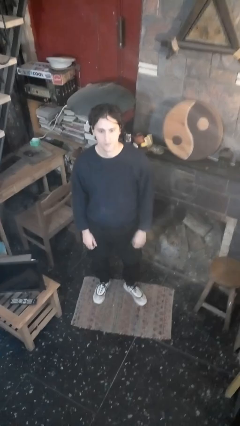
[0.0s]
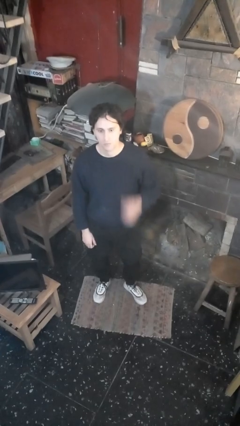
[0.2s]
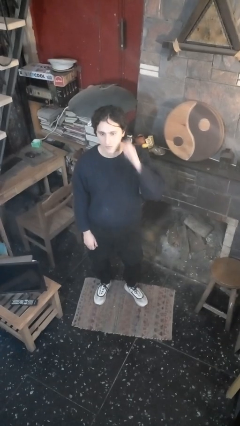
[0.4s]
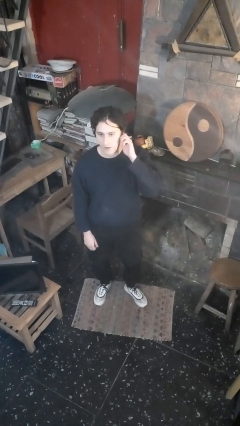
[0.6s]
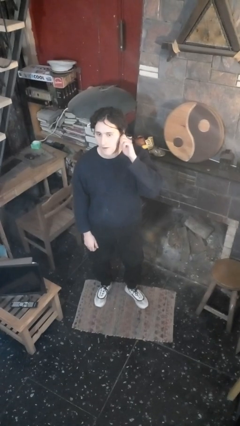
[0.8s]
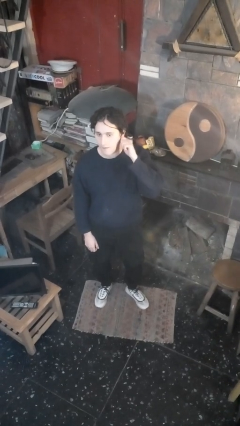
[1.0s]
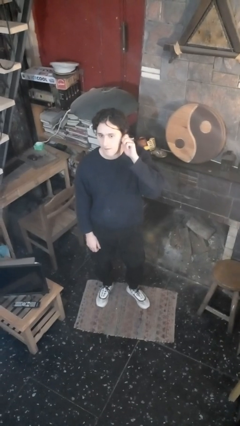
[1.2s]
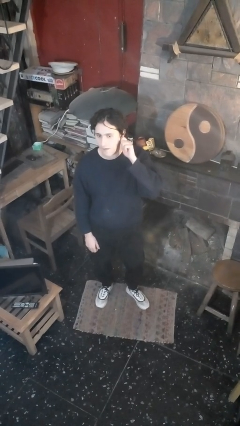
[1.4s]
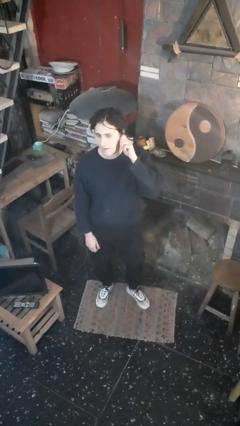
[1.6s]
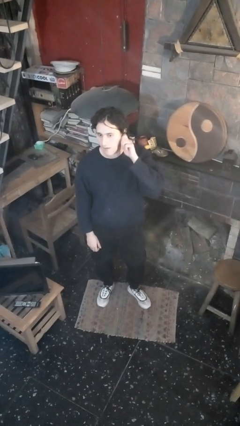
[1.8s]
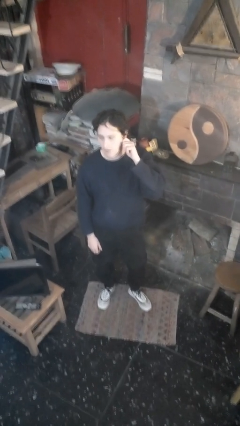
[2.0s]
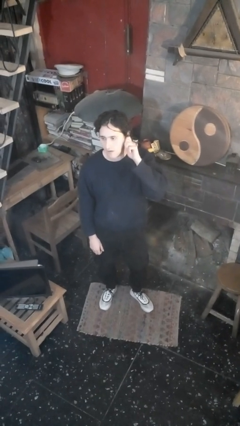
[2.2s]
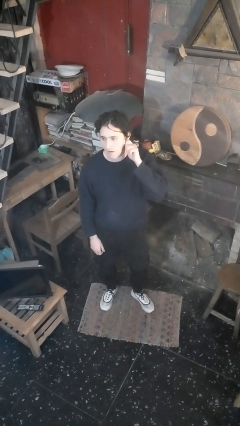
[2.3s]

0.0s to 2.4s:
person touches earlobe

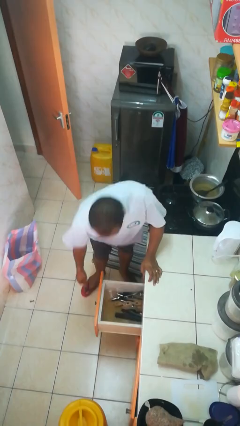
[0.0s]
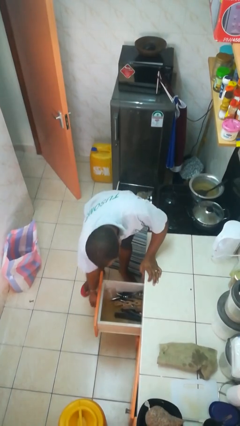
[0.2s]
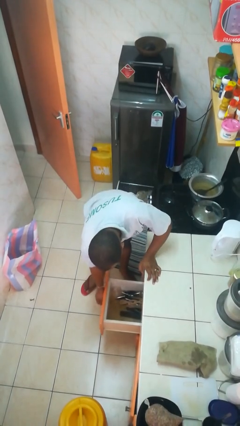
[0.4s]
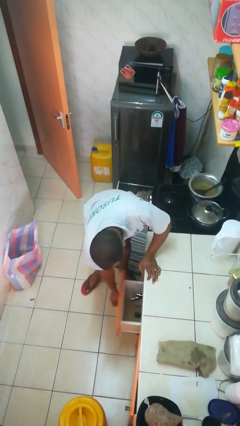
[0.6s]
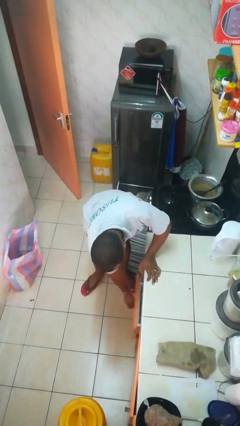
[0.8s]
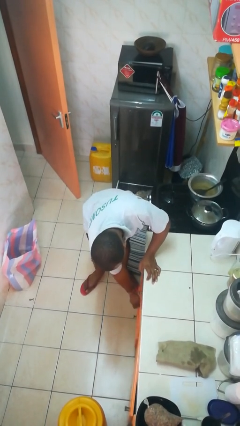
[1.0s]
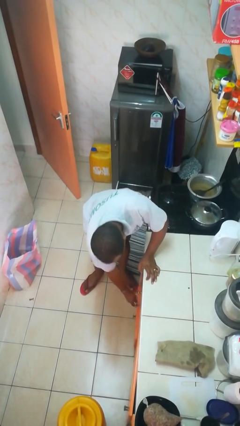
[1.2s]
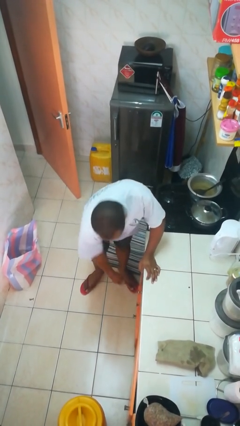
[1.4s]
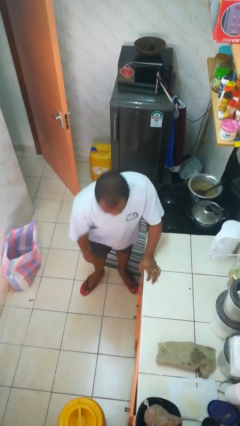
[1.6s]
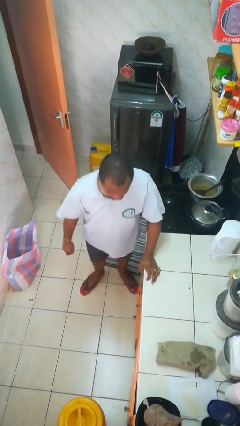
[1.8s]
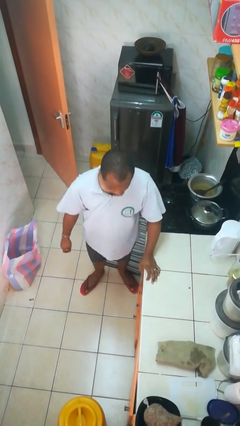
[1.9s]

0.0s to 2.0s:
person closes kitchen drawer

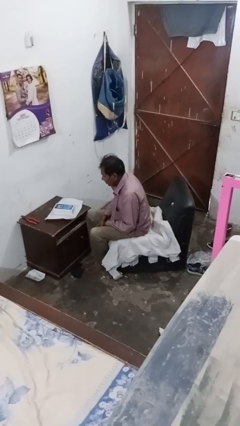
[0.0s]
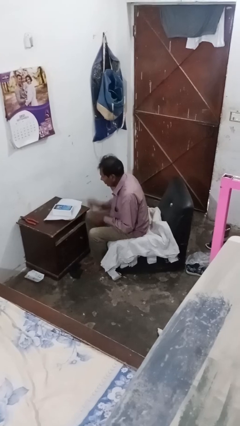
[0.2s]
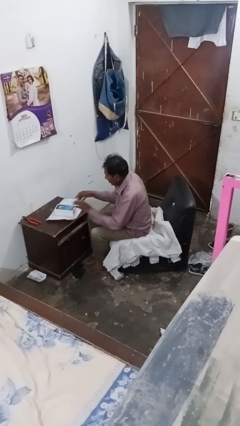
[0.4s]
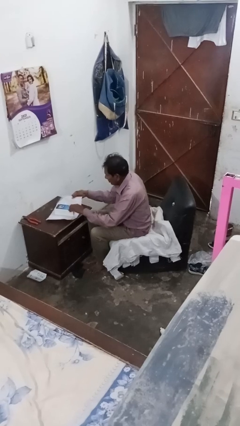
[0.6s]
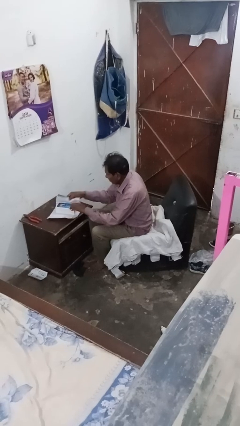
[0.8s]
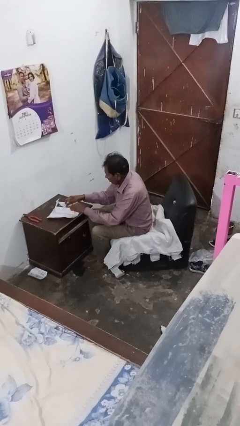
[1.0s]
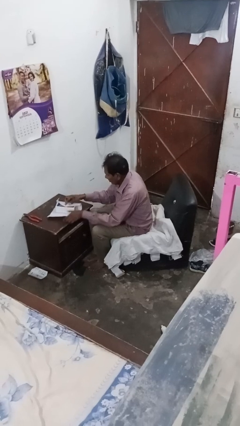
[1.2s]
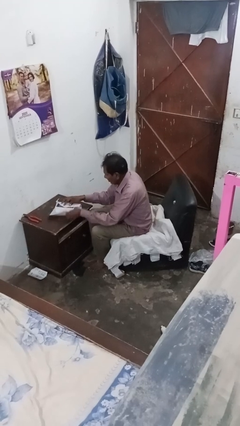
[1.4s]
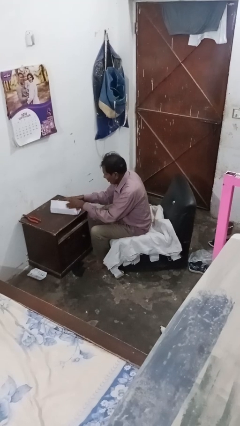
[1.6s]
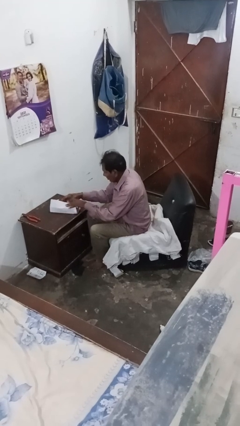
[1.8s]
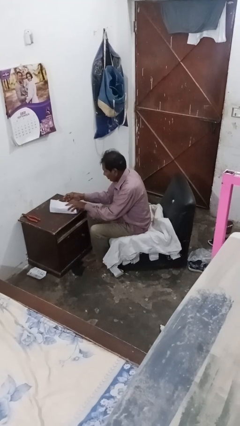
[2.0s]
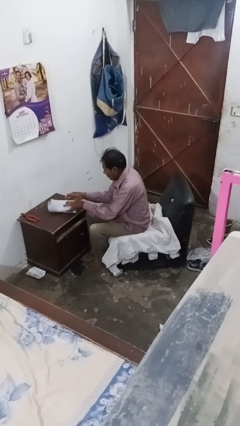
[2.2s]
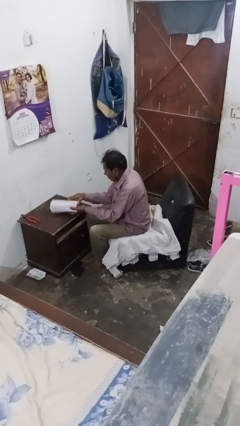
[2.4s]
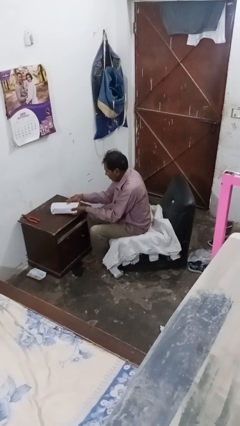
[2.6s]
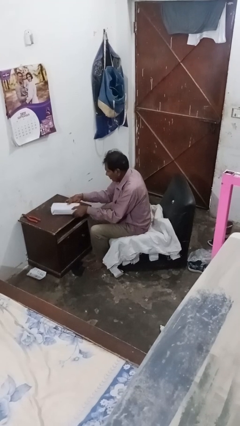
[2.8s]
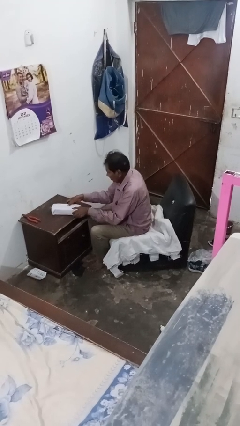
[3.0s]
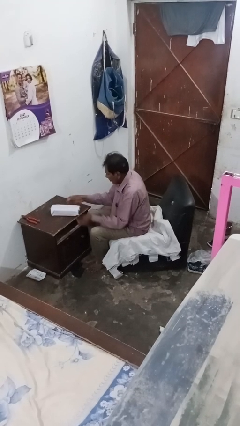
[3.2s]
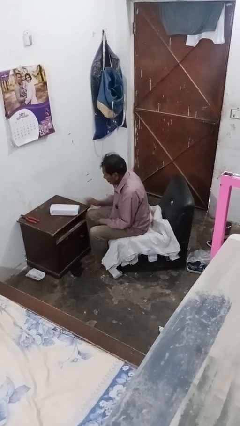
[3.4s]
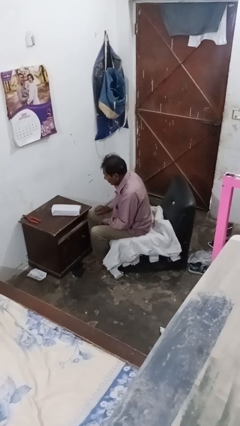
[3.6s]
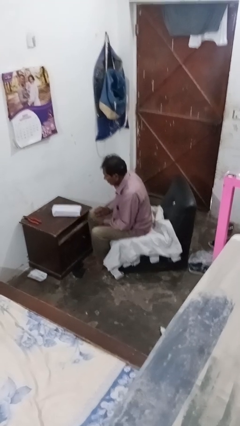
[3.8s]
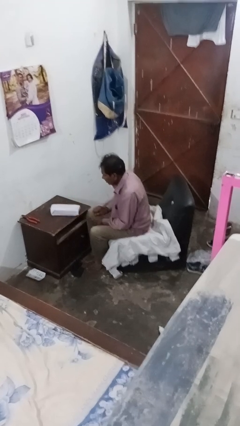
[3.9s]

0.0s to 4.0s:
person wraps box

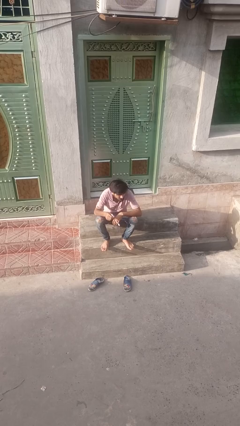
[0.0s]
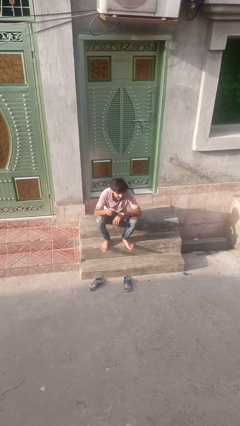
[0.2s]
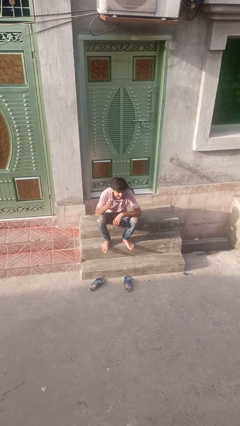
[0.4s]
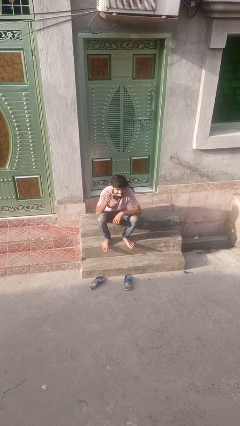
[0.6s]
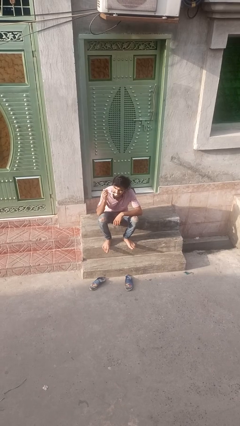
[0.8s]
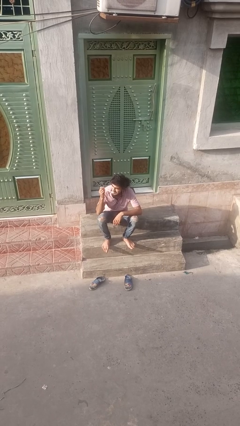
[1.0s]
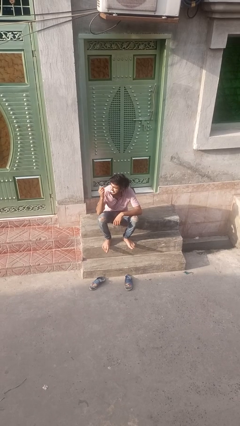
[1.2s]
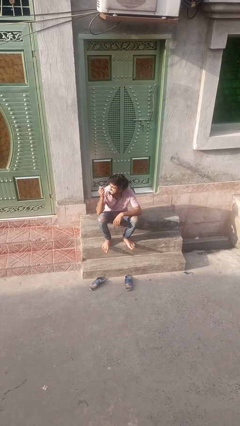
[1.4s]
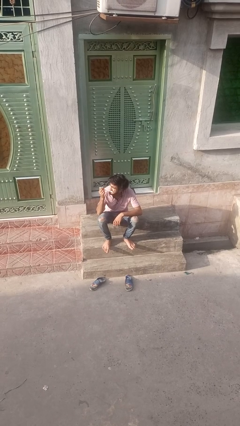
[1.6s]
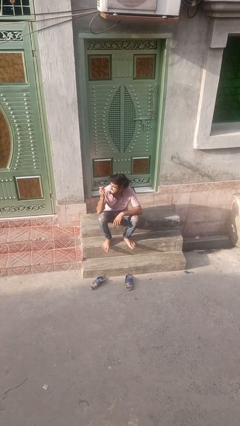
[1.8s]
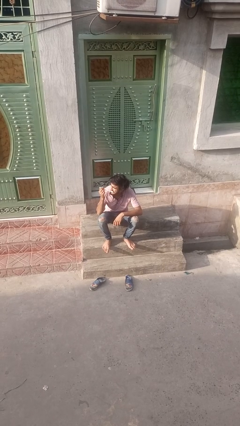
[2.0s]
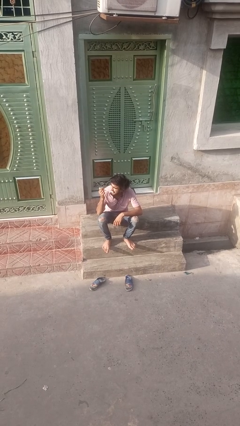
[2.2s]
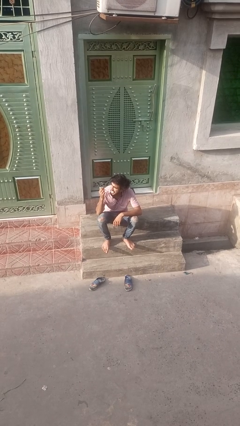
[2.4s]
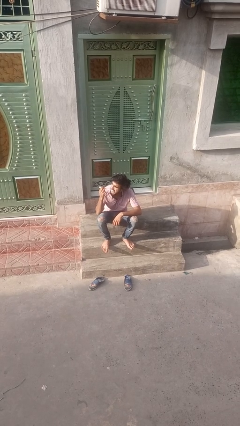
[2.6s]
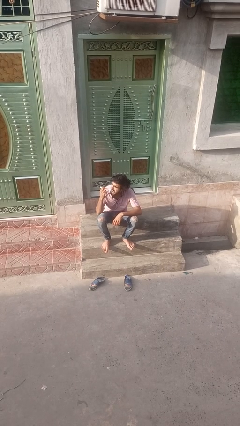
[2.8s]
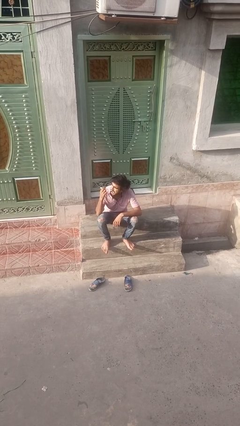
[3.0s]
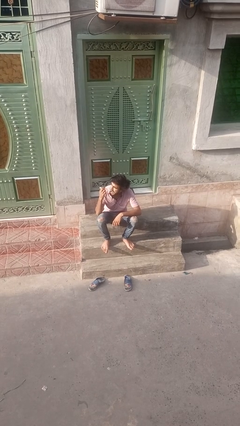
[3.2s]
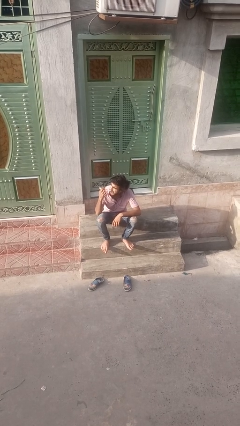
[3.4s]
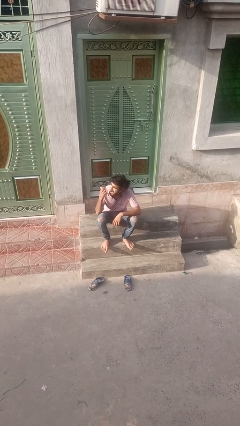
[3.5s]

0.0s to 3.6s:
person brushes hair

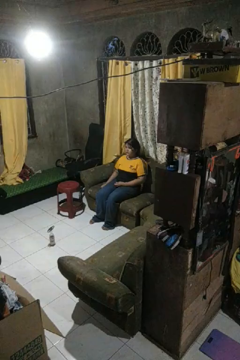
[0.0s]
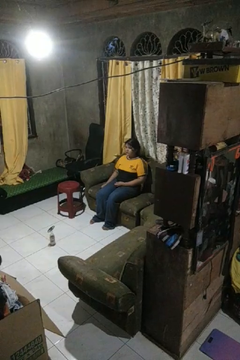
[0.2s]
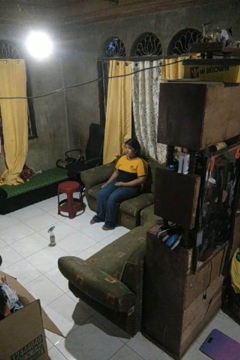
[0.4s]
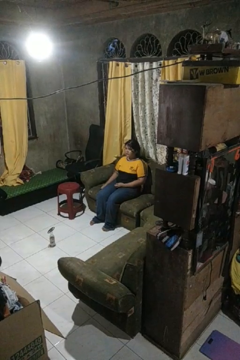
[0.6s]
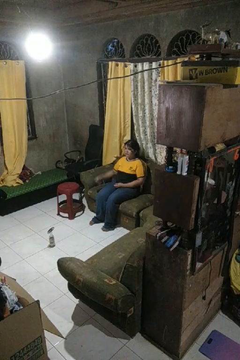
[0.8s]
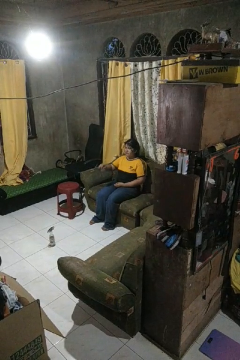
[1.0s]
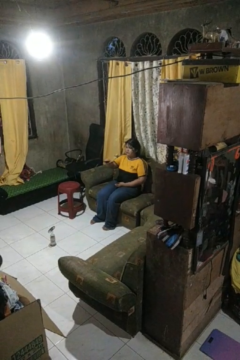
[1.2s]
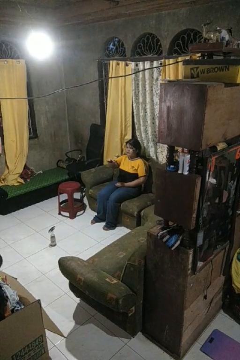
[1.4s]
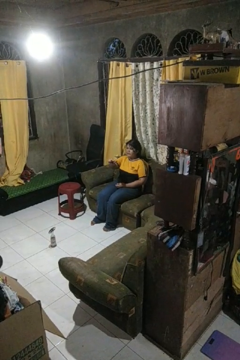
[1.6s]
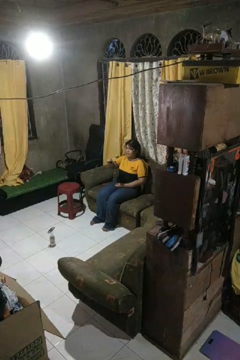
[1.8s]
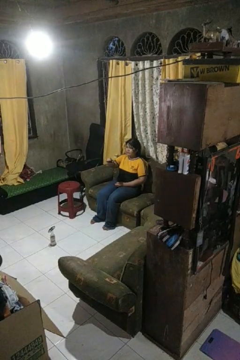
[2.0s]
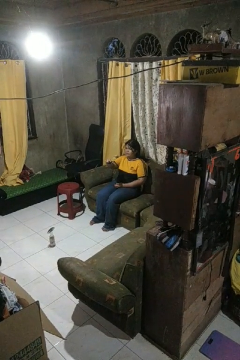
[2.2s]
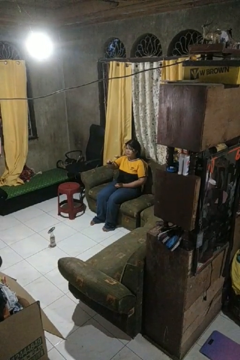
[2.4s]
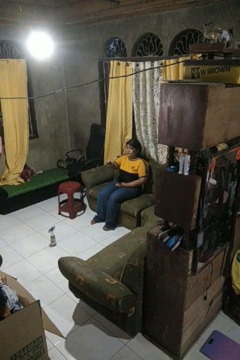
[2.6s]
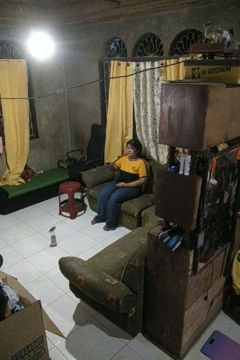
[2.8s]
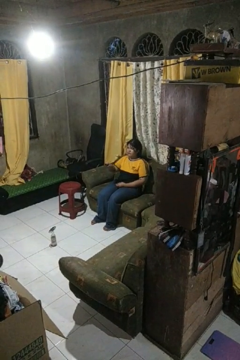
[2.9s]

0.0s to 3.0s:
person uses television remote

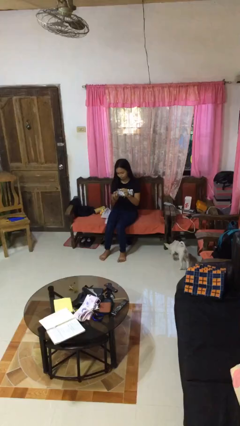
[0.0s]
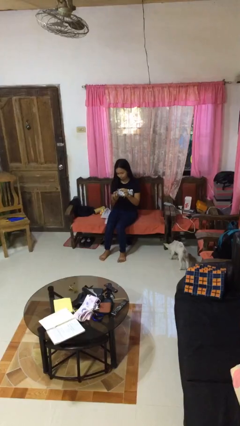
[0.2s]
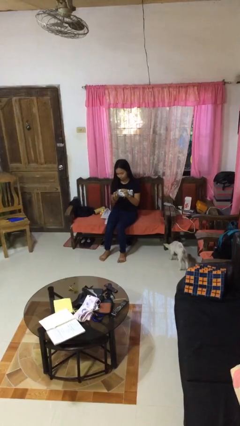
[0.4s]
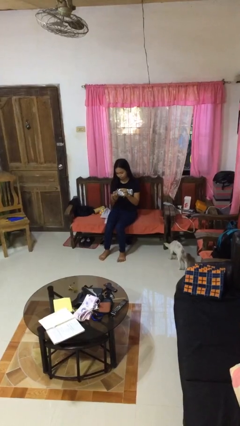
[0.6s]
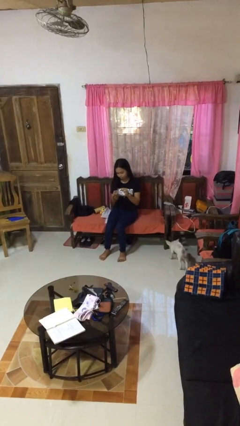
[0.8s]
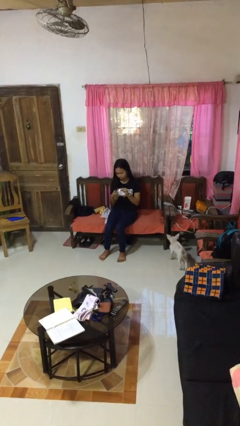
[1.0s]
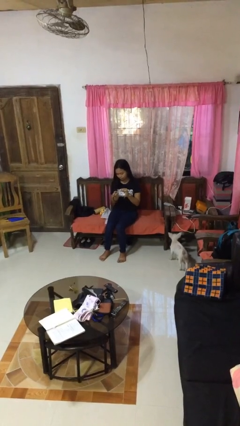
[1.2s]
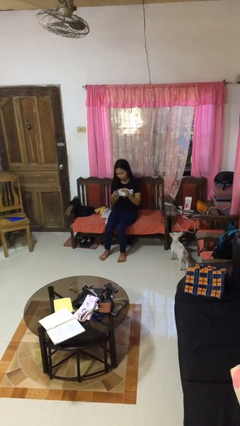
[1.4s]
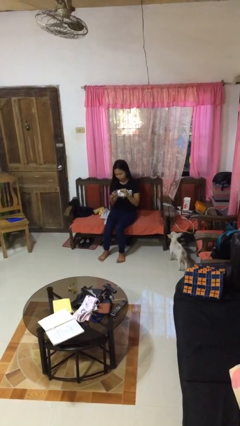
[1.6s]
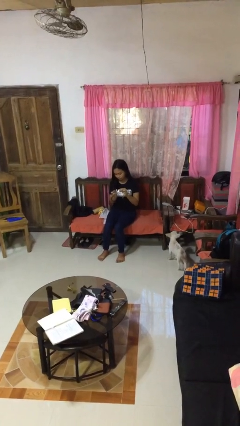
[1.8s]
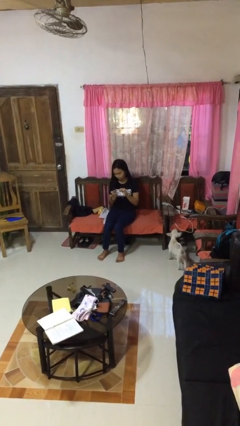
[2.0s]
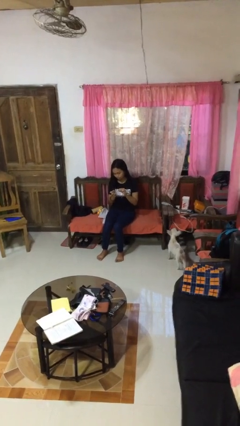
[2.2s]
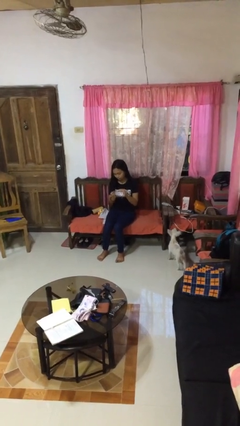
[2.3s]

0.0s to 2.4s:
person clips fingernails

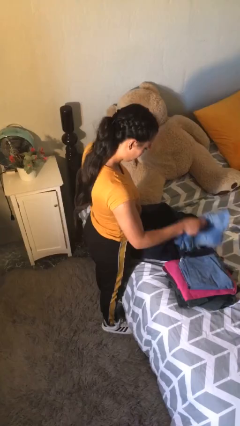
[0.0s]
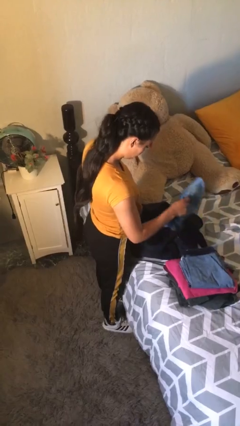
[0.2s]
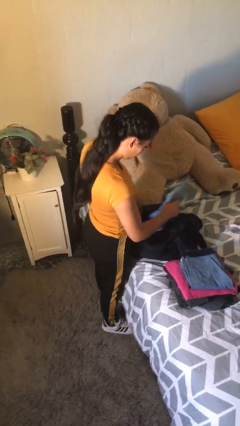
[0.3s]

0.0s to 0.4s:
person loads clothes into suitcase
